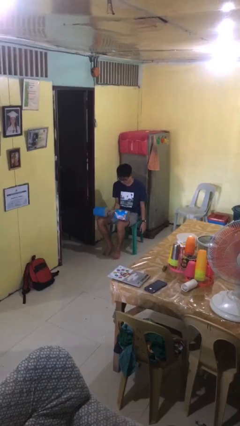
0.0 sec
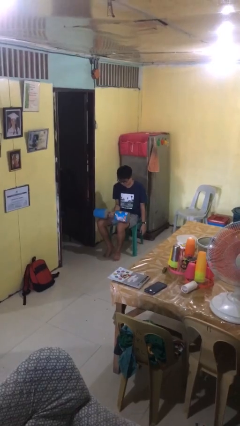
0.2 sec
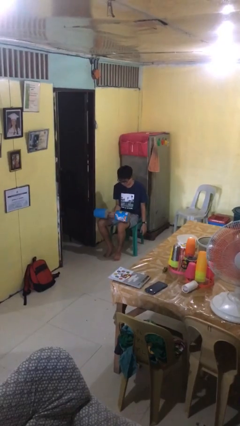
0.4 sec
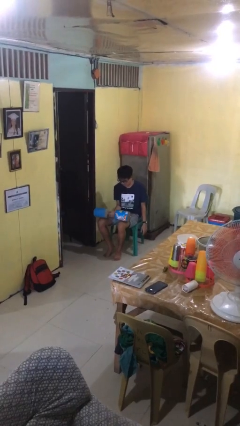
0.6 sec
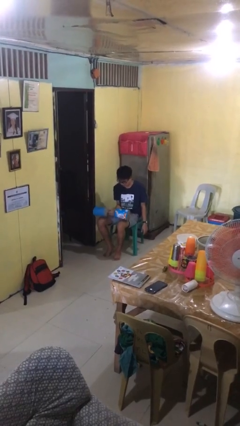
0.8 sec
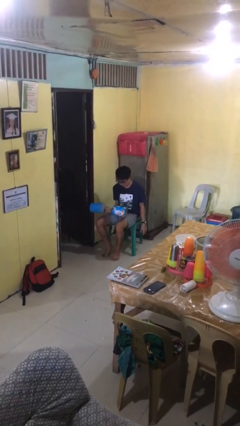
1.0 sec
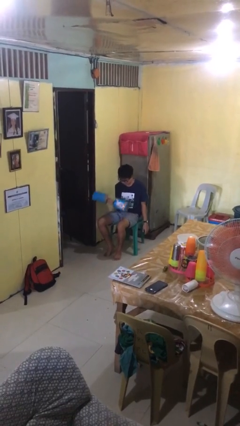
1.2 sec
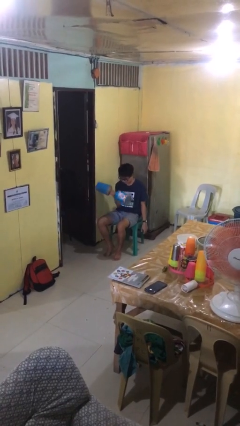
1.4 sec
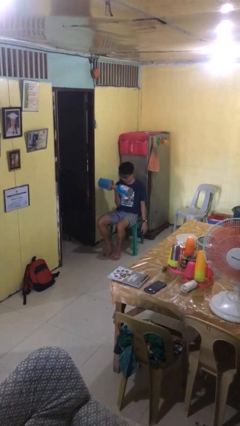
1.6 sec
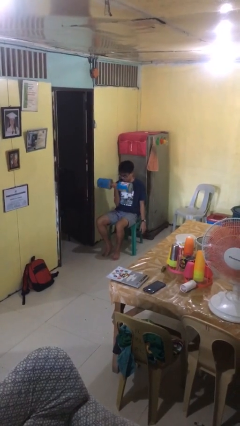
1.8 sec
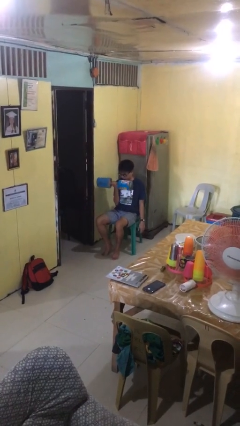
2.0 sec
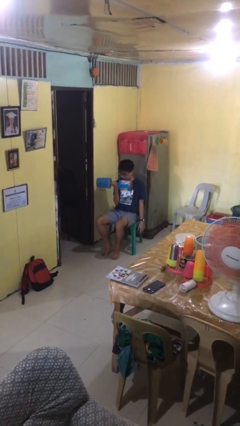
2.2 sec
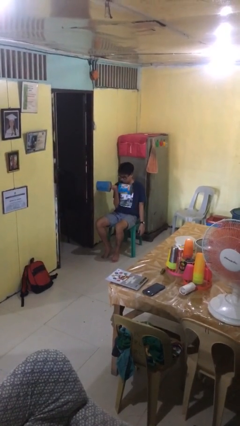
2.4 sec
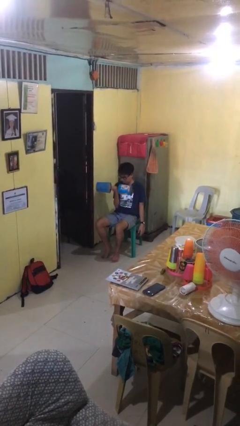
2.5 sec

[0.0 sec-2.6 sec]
person lifts dumbbells

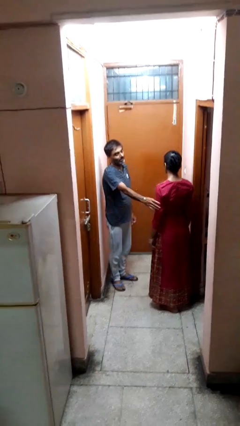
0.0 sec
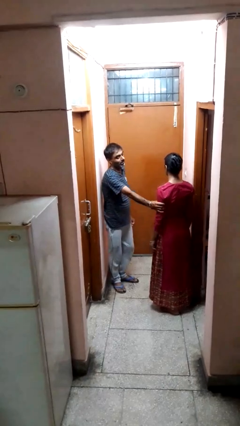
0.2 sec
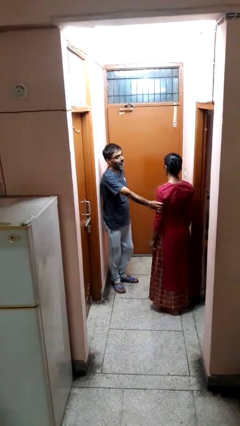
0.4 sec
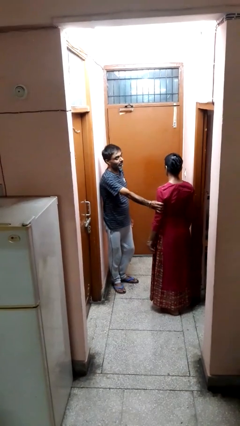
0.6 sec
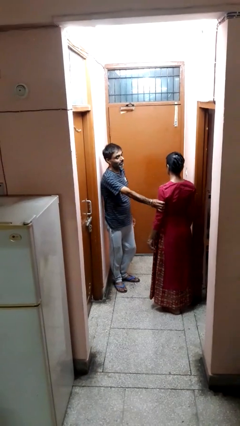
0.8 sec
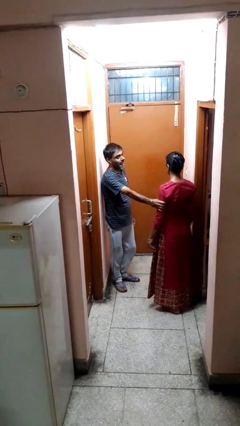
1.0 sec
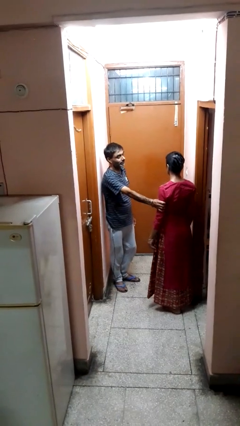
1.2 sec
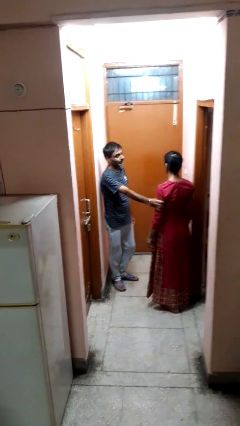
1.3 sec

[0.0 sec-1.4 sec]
person grabs person by bicep

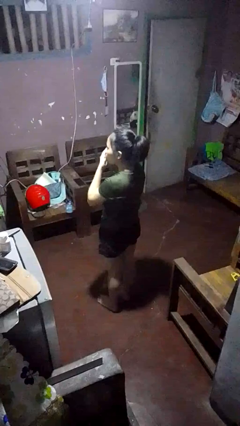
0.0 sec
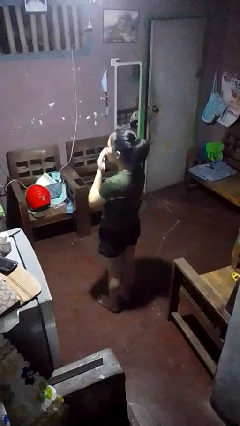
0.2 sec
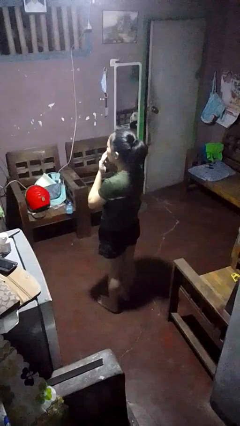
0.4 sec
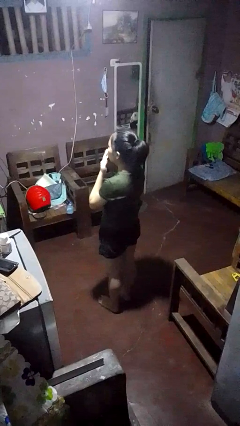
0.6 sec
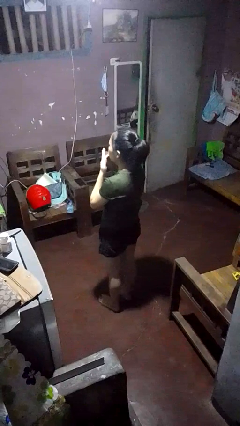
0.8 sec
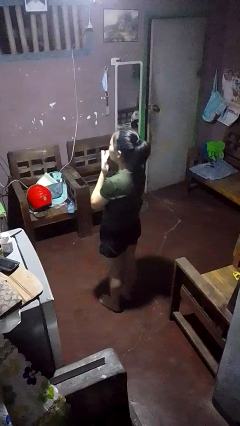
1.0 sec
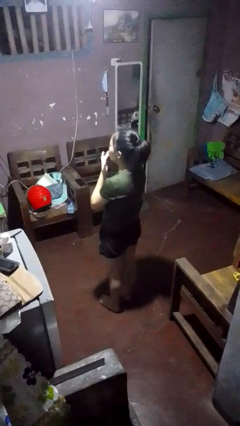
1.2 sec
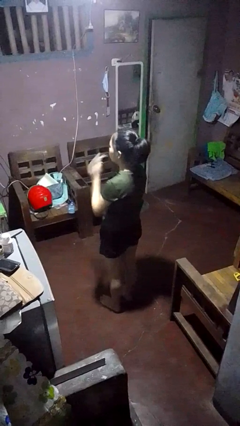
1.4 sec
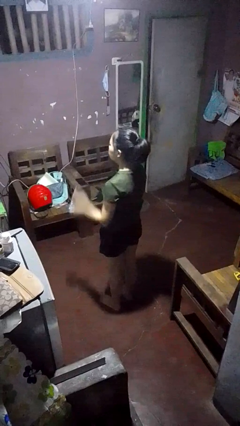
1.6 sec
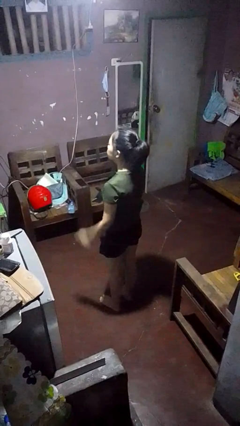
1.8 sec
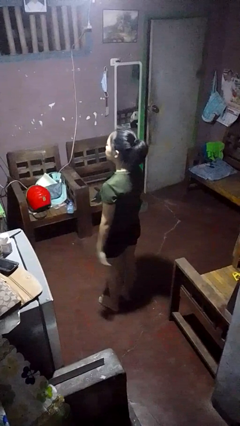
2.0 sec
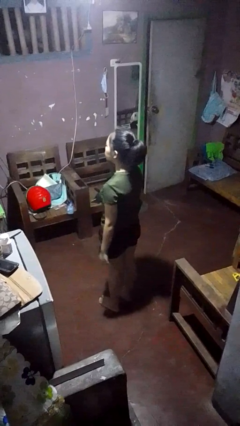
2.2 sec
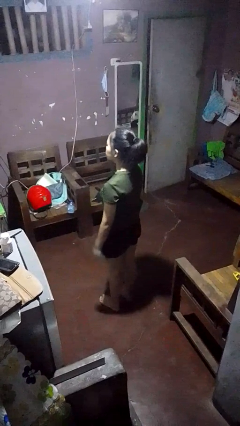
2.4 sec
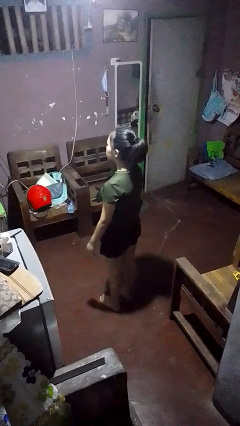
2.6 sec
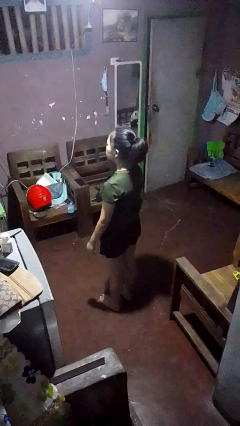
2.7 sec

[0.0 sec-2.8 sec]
person licks fingers

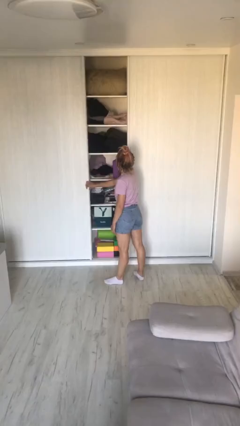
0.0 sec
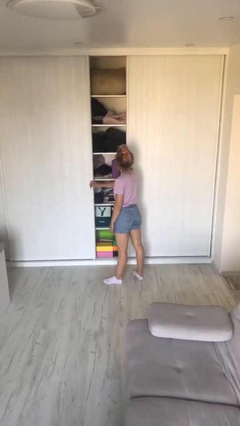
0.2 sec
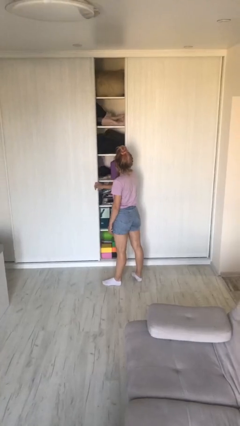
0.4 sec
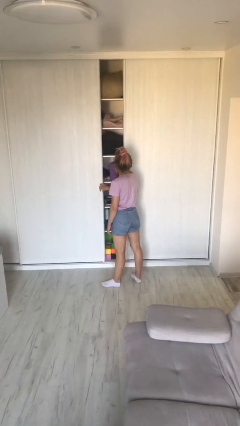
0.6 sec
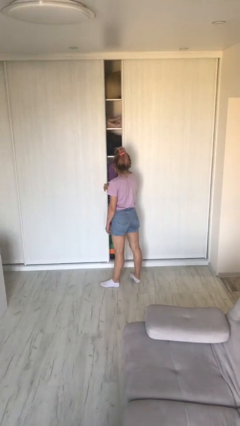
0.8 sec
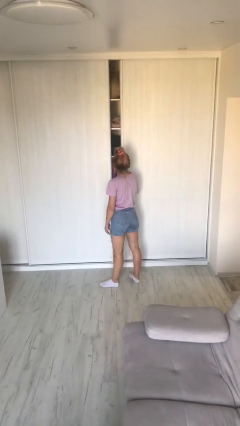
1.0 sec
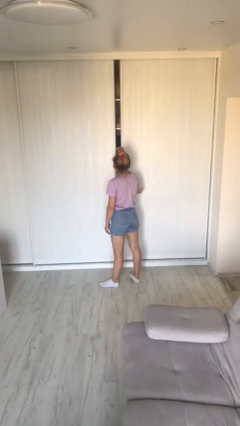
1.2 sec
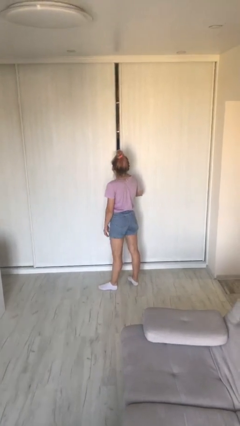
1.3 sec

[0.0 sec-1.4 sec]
person closes sliding door

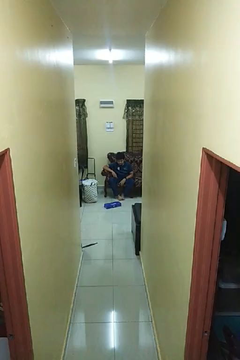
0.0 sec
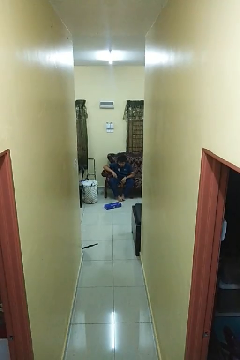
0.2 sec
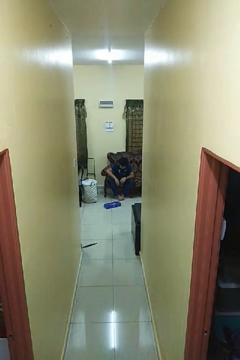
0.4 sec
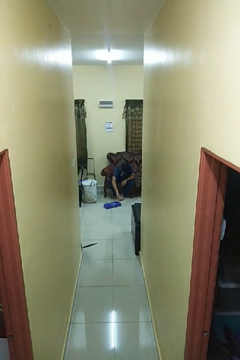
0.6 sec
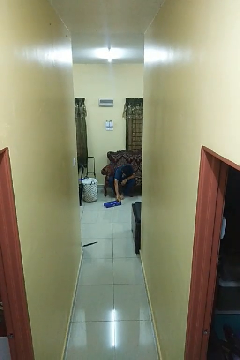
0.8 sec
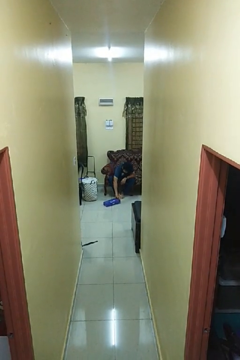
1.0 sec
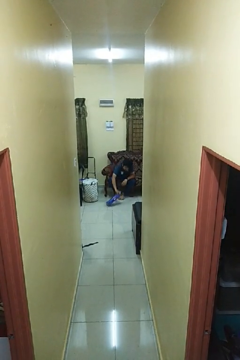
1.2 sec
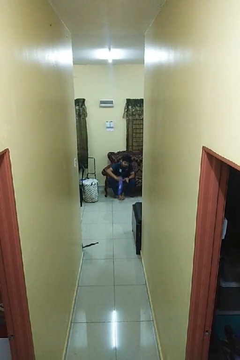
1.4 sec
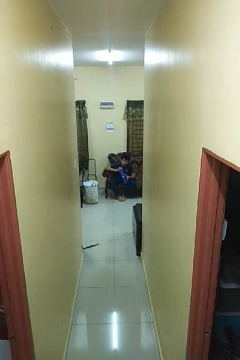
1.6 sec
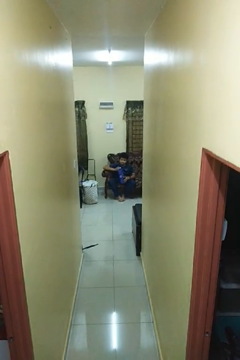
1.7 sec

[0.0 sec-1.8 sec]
person picks up object from floor

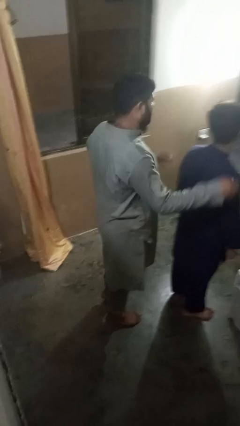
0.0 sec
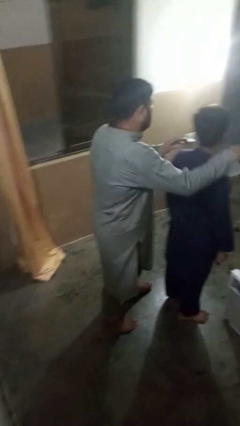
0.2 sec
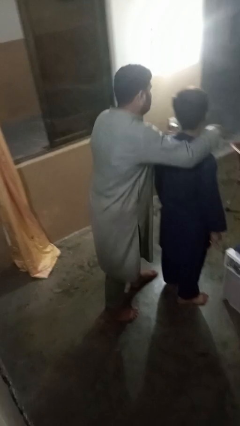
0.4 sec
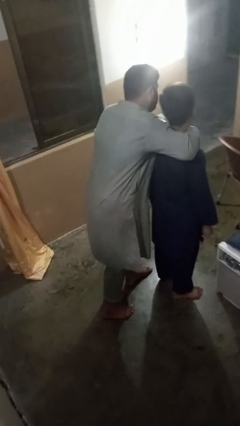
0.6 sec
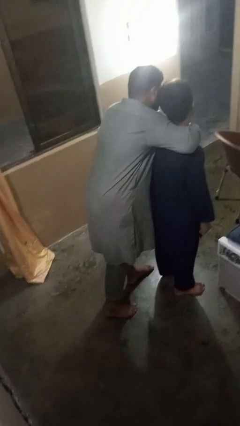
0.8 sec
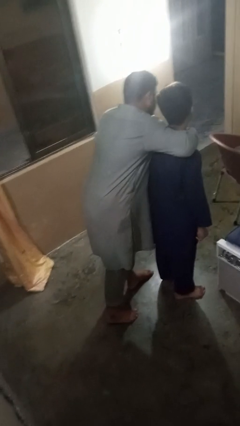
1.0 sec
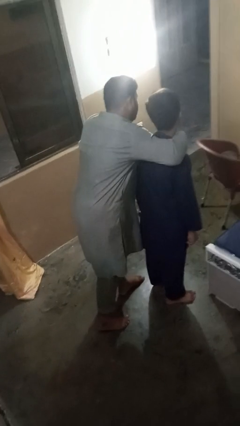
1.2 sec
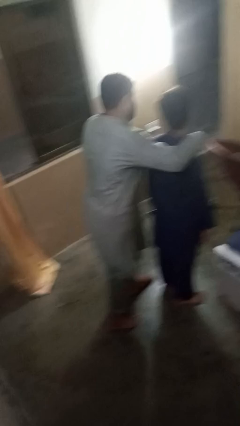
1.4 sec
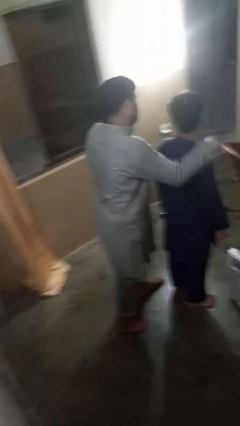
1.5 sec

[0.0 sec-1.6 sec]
person hugs person from behind

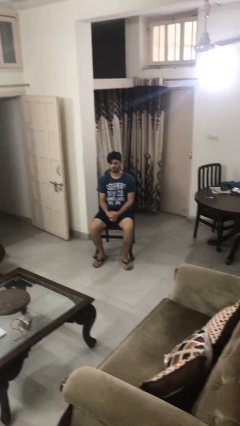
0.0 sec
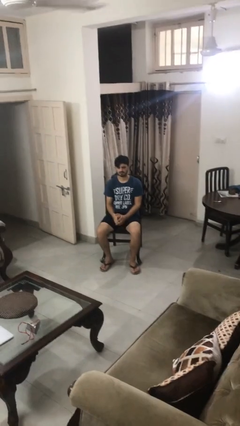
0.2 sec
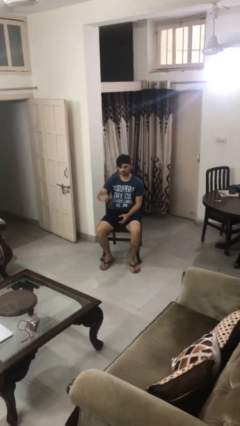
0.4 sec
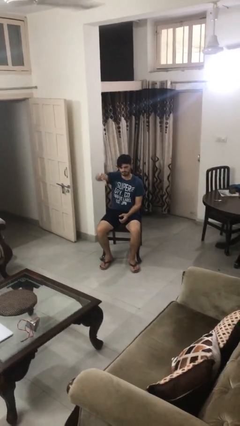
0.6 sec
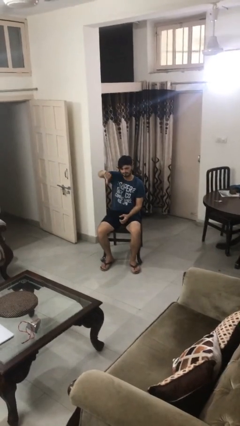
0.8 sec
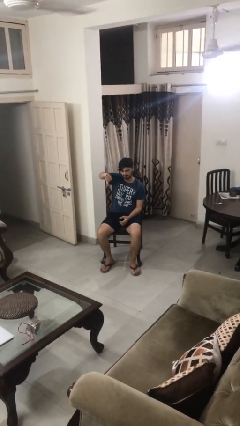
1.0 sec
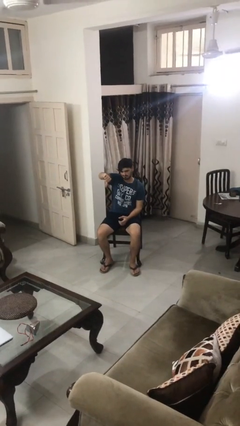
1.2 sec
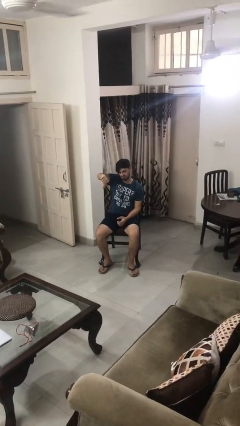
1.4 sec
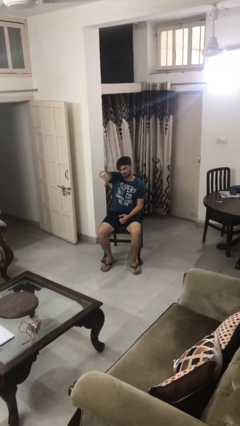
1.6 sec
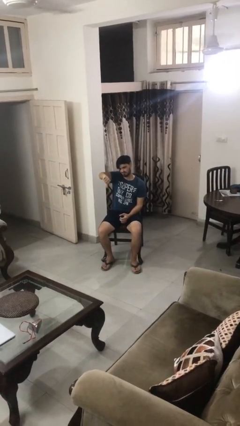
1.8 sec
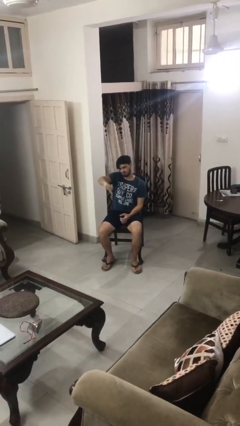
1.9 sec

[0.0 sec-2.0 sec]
person gestures thumbs down

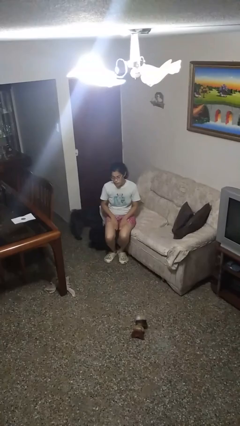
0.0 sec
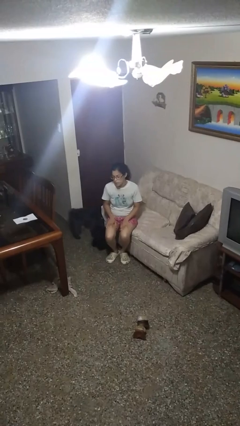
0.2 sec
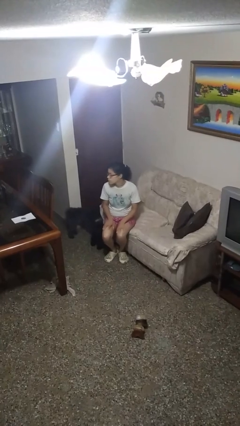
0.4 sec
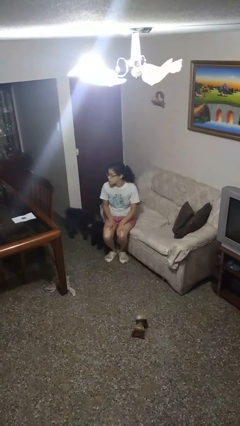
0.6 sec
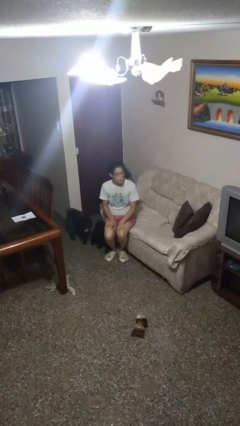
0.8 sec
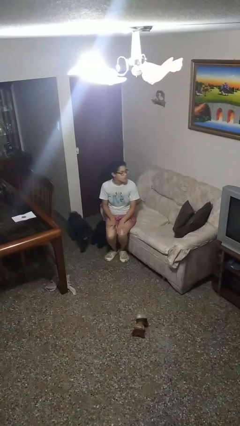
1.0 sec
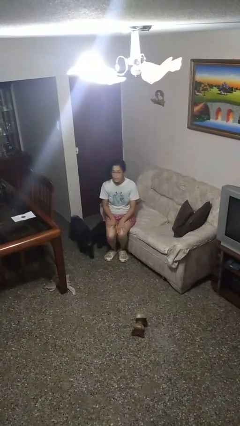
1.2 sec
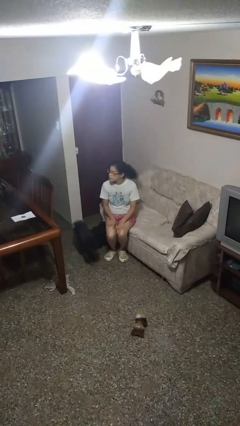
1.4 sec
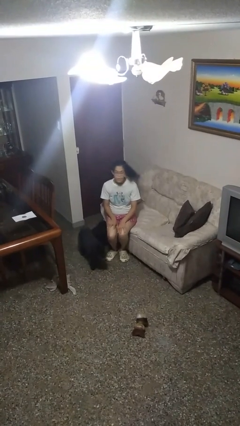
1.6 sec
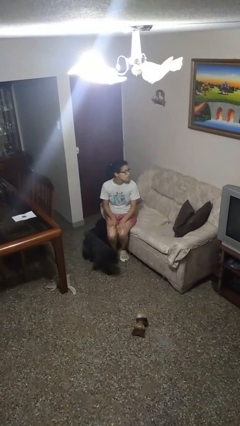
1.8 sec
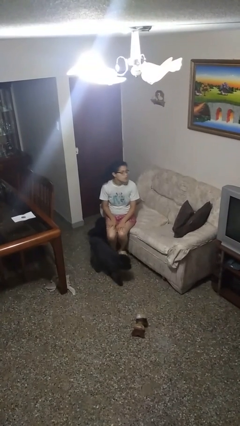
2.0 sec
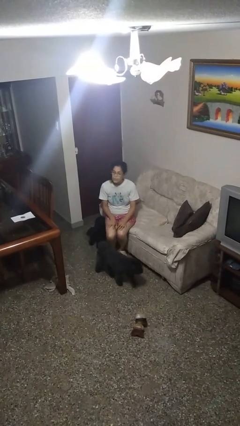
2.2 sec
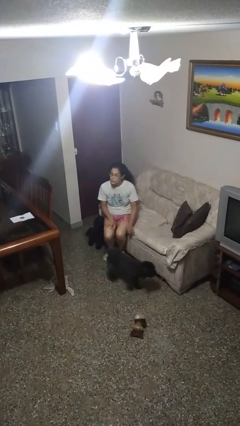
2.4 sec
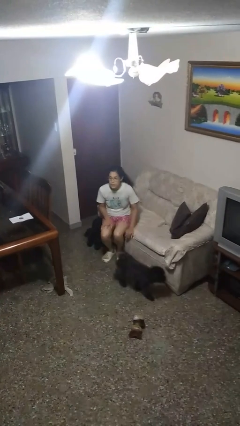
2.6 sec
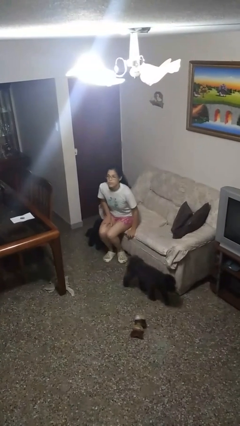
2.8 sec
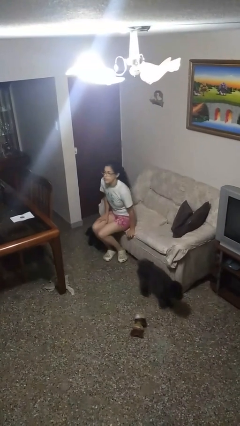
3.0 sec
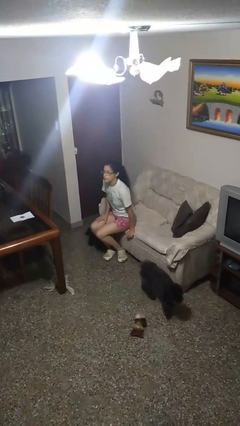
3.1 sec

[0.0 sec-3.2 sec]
person shakes head

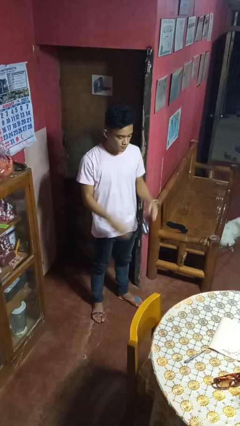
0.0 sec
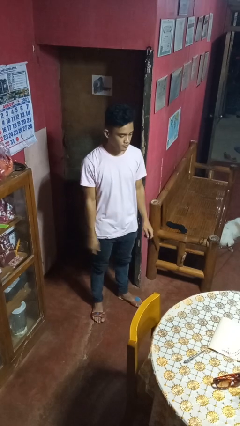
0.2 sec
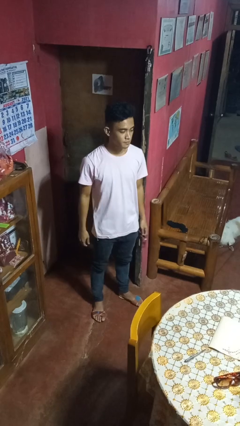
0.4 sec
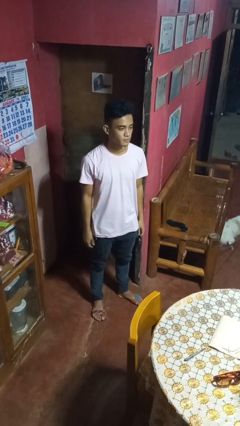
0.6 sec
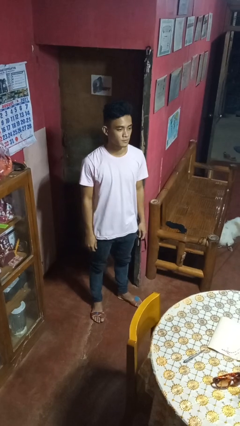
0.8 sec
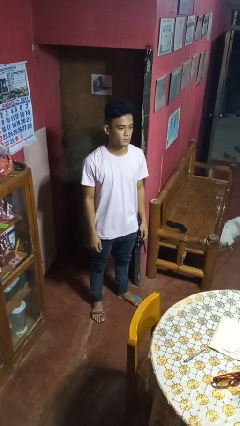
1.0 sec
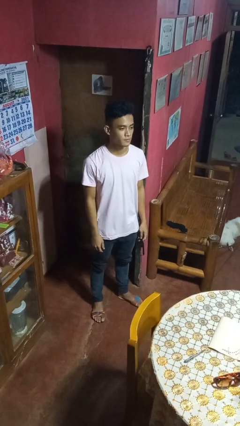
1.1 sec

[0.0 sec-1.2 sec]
person takes off sunglasses
